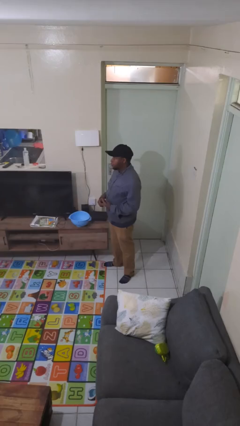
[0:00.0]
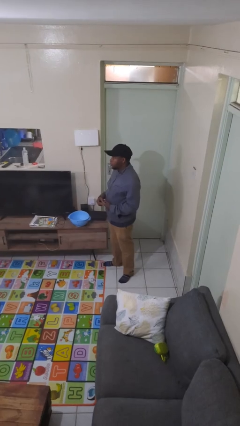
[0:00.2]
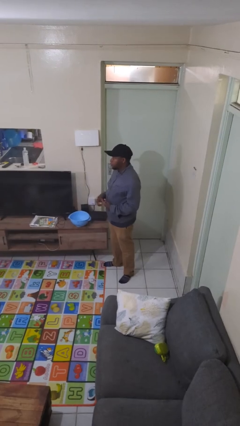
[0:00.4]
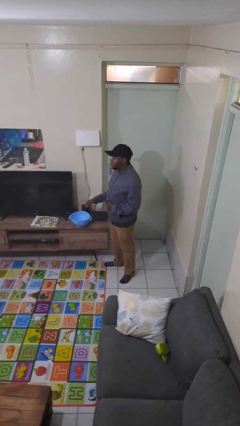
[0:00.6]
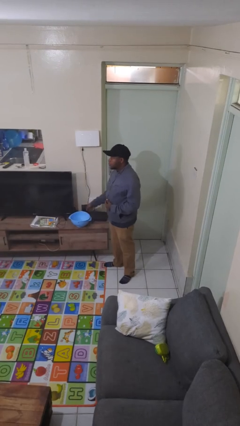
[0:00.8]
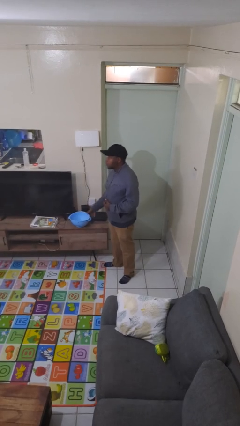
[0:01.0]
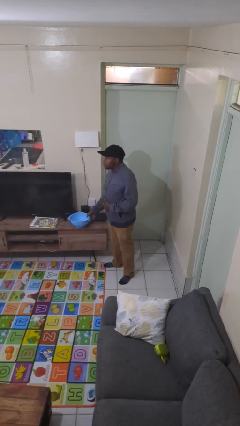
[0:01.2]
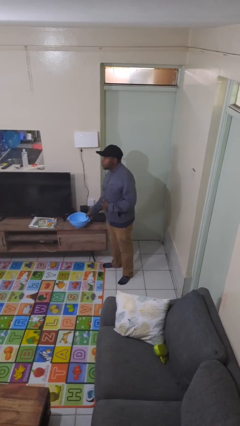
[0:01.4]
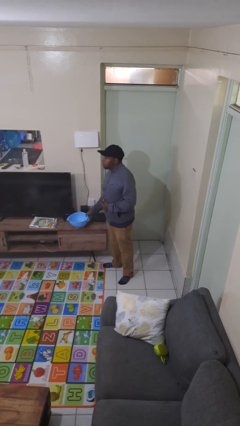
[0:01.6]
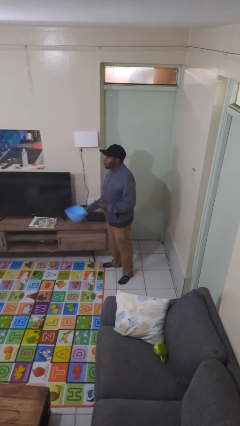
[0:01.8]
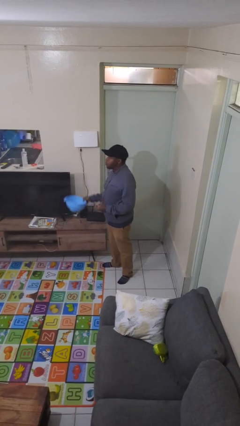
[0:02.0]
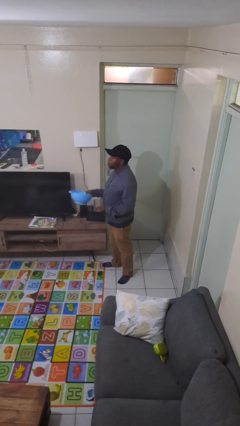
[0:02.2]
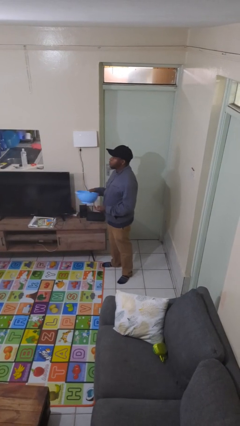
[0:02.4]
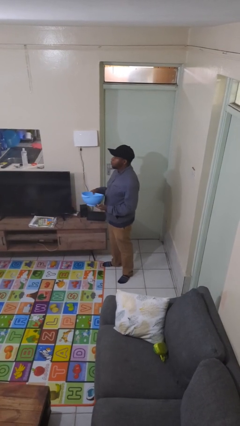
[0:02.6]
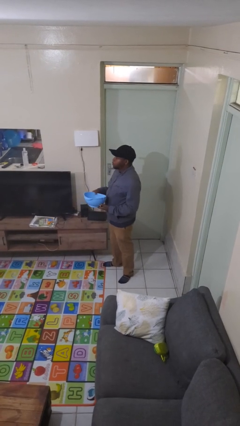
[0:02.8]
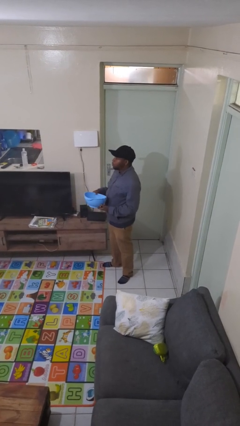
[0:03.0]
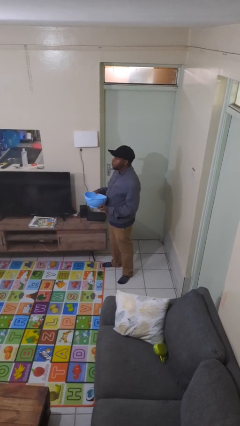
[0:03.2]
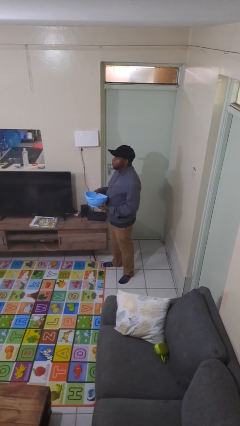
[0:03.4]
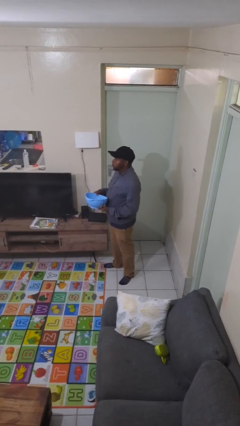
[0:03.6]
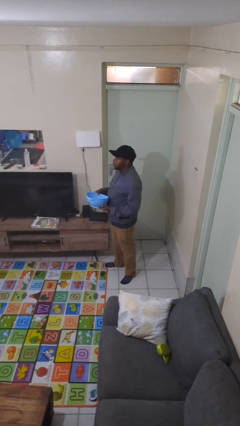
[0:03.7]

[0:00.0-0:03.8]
person picks up object from countertop

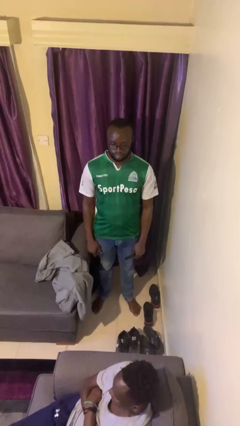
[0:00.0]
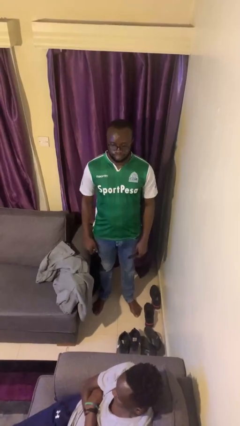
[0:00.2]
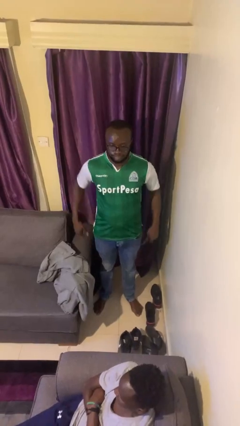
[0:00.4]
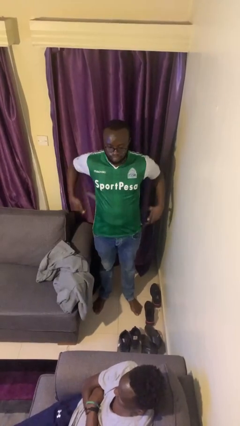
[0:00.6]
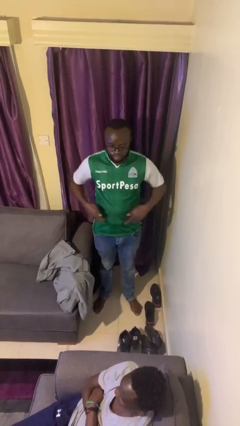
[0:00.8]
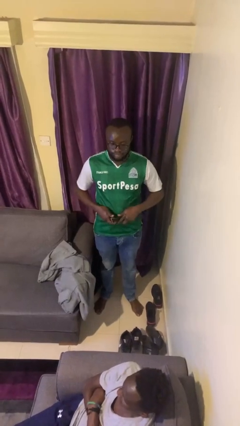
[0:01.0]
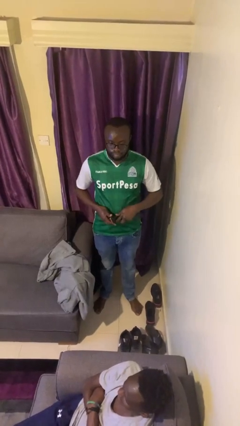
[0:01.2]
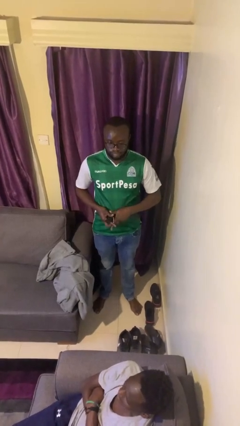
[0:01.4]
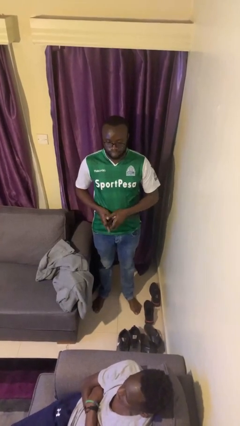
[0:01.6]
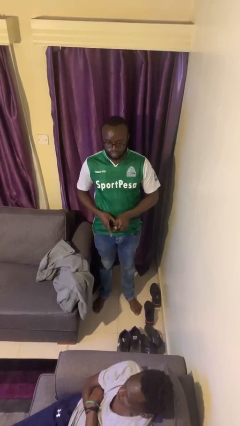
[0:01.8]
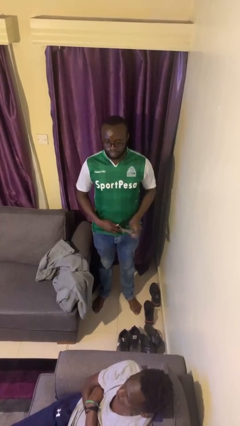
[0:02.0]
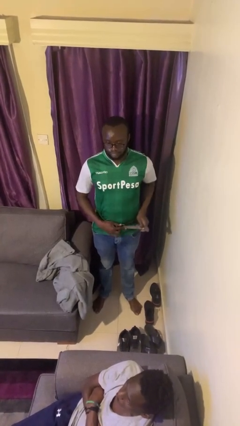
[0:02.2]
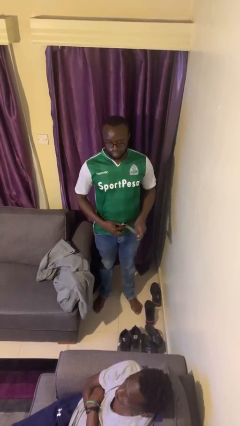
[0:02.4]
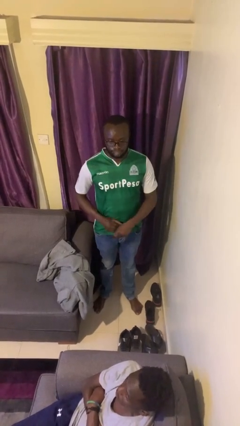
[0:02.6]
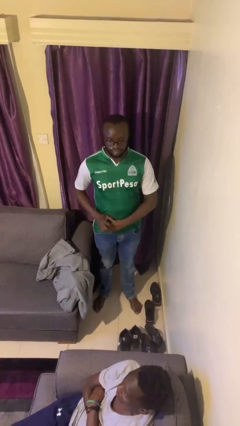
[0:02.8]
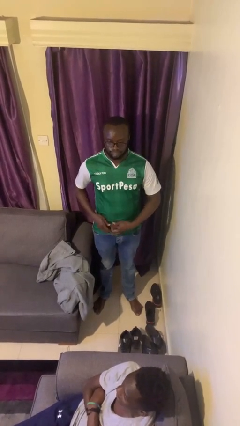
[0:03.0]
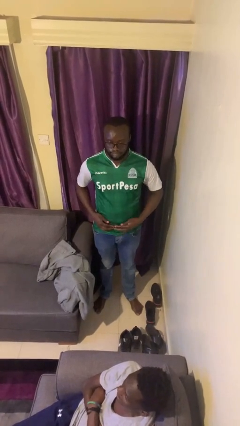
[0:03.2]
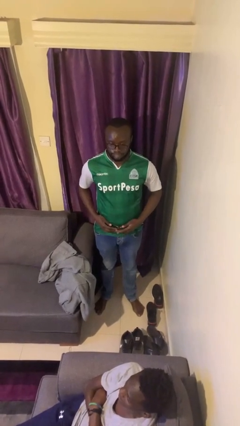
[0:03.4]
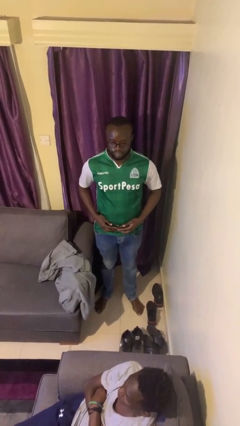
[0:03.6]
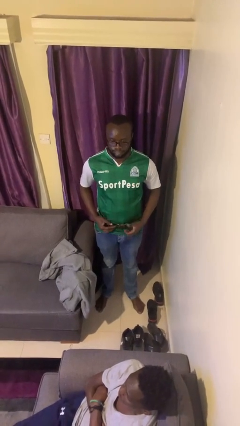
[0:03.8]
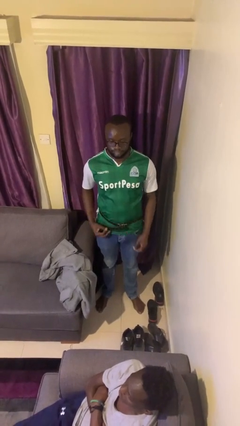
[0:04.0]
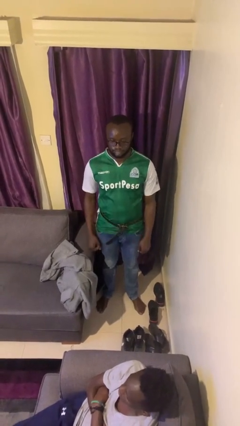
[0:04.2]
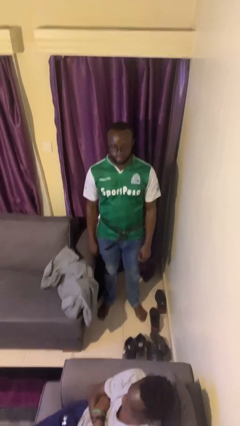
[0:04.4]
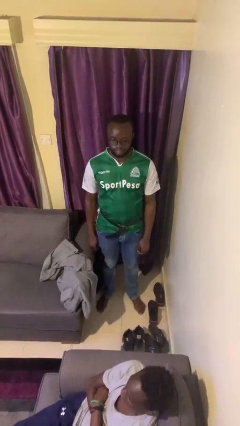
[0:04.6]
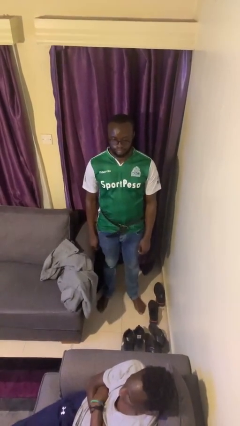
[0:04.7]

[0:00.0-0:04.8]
person puts on belt

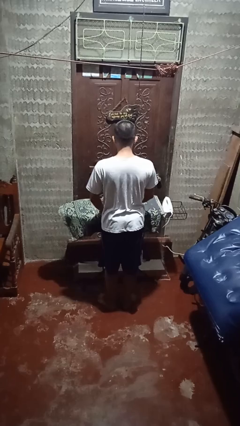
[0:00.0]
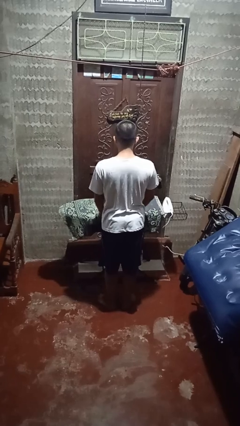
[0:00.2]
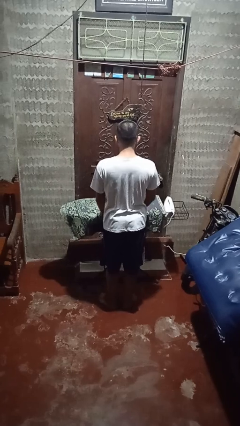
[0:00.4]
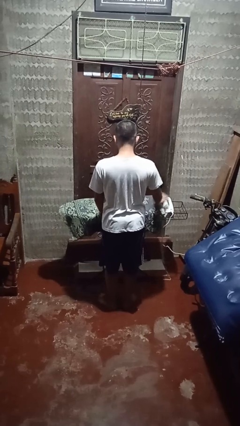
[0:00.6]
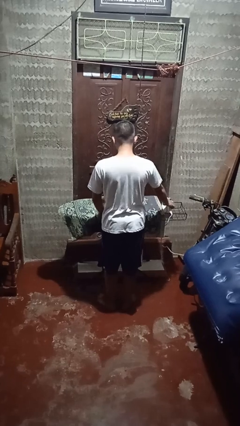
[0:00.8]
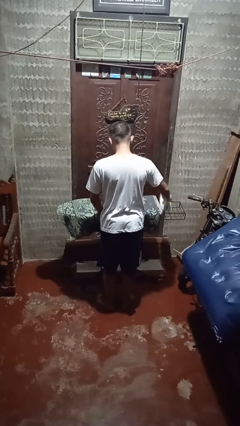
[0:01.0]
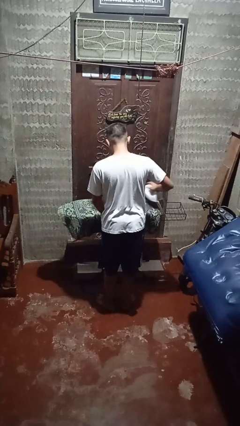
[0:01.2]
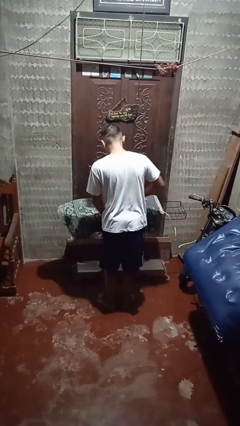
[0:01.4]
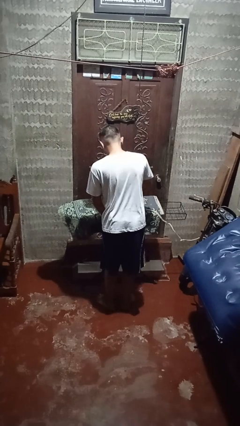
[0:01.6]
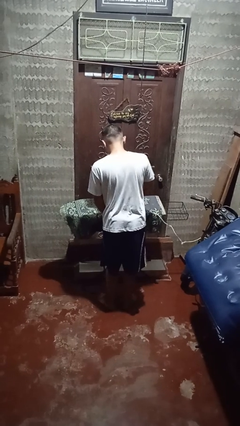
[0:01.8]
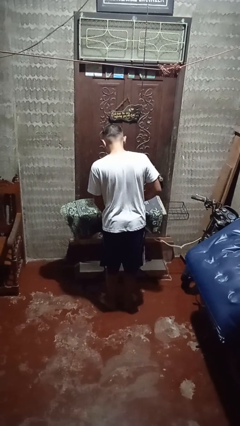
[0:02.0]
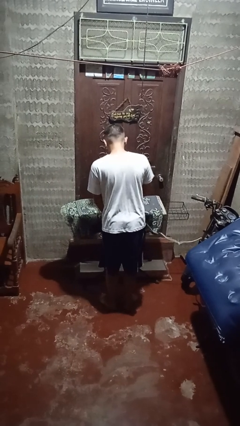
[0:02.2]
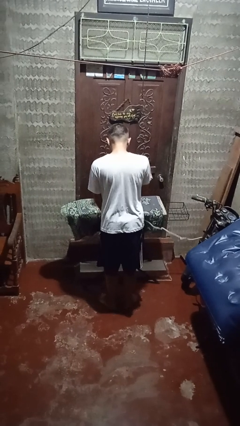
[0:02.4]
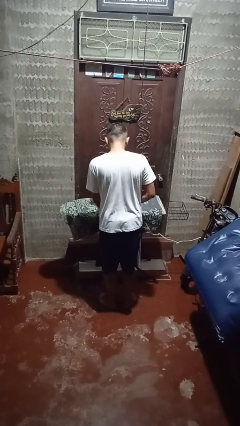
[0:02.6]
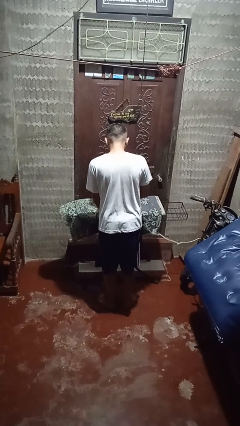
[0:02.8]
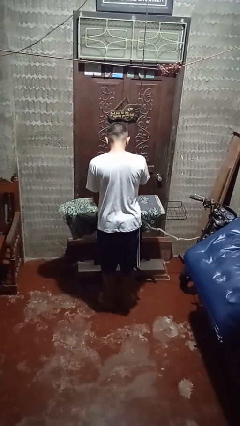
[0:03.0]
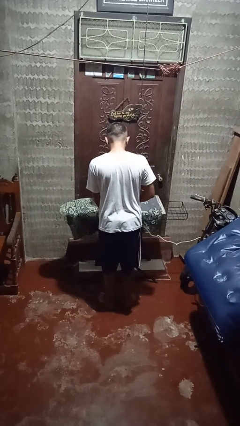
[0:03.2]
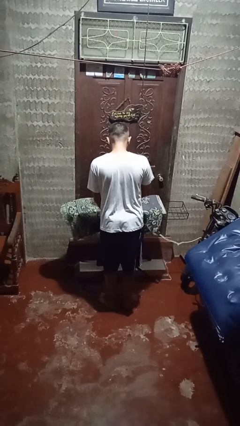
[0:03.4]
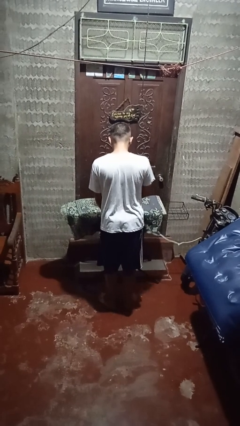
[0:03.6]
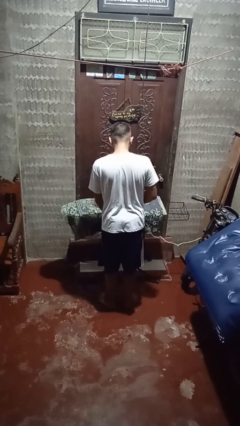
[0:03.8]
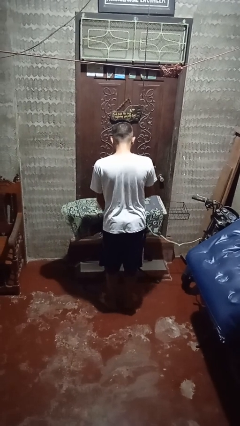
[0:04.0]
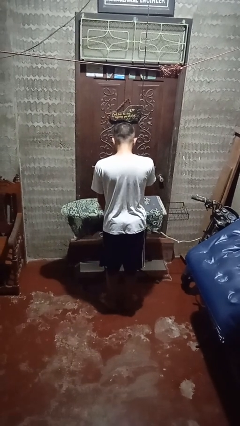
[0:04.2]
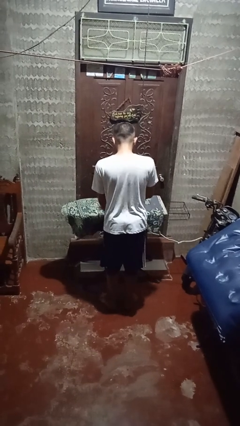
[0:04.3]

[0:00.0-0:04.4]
person irons clothes

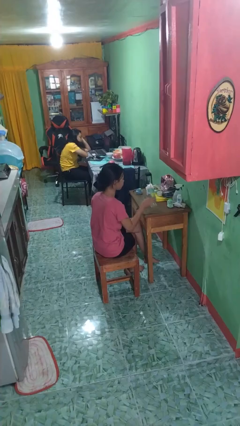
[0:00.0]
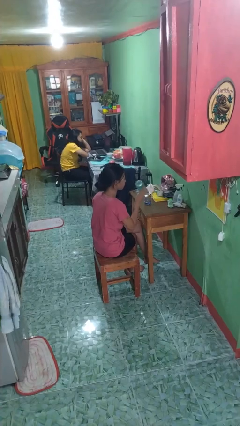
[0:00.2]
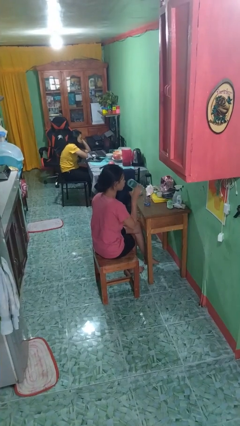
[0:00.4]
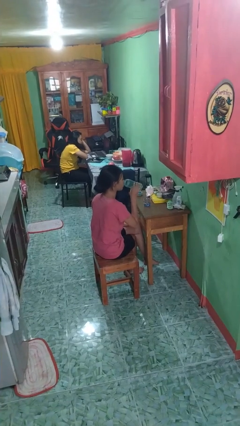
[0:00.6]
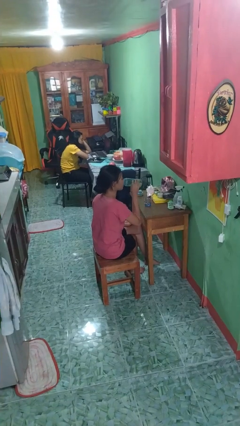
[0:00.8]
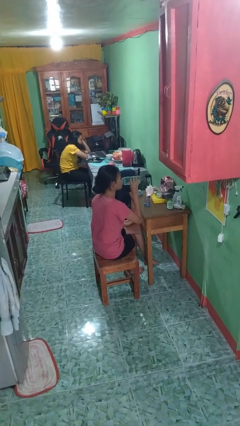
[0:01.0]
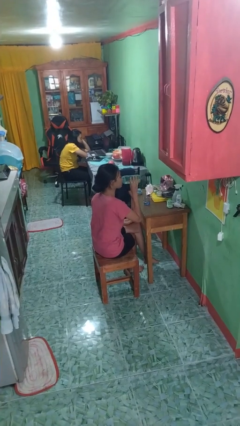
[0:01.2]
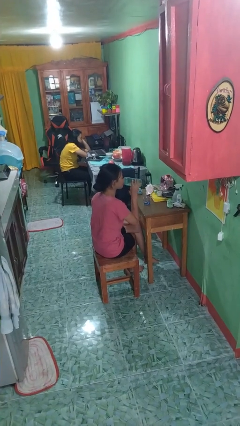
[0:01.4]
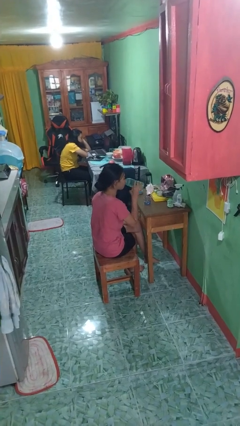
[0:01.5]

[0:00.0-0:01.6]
person drinks from cup

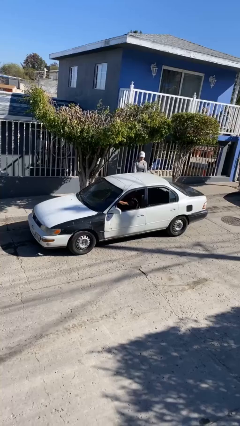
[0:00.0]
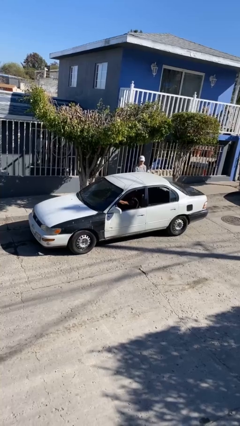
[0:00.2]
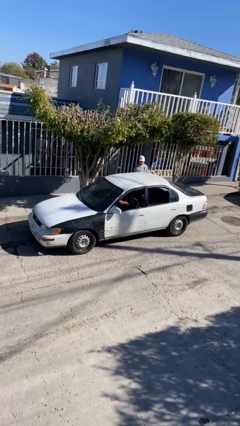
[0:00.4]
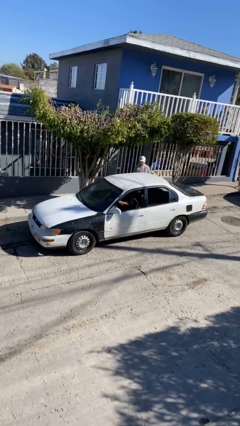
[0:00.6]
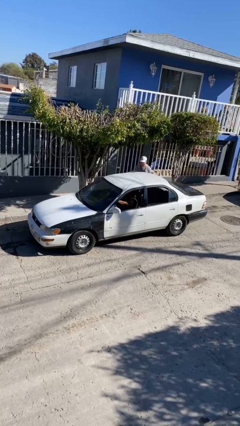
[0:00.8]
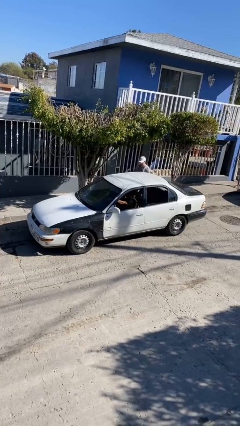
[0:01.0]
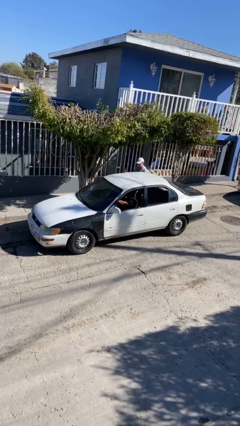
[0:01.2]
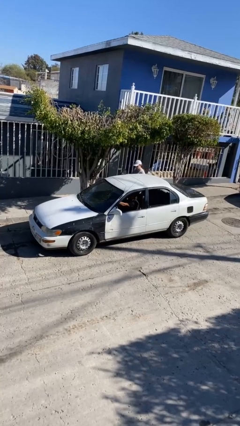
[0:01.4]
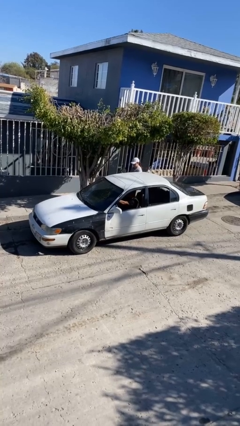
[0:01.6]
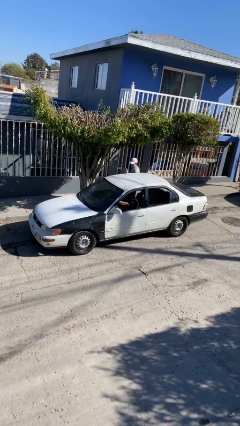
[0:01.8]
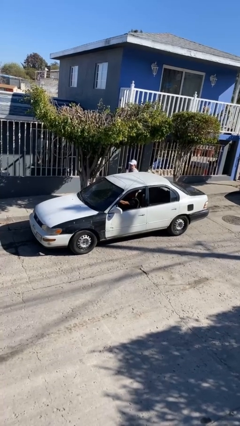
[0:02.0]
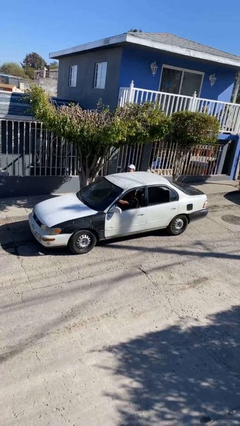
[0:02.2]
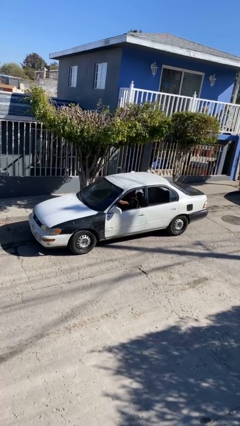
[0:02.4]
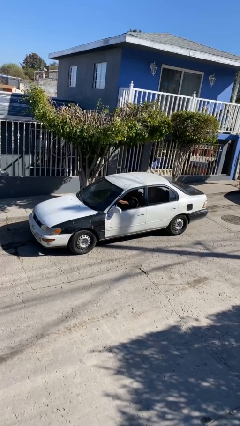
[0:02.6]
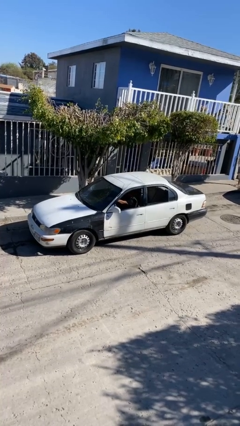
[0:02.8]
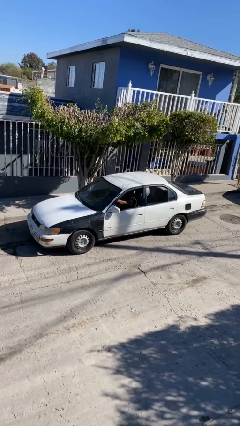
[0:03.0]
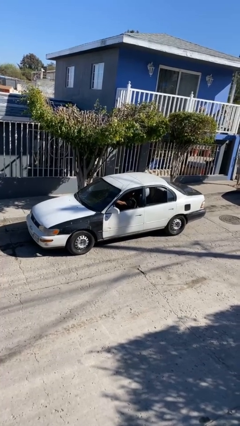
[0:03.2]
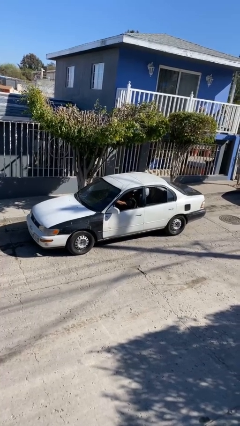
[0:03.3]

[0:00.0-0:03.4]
car picks up person
